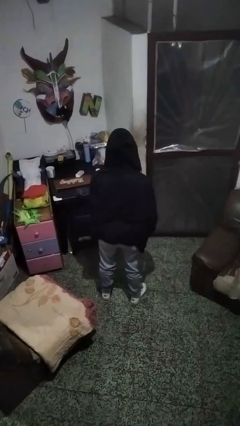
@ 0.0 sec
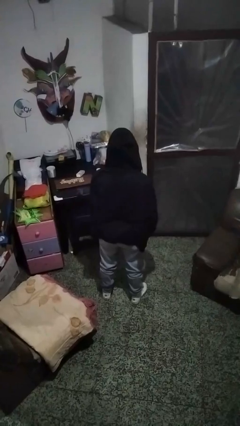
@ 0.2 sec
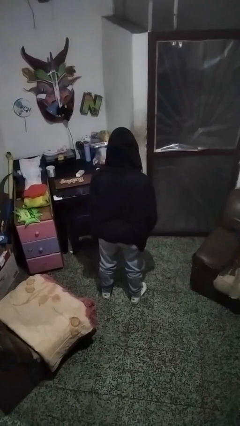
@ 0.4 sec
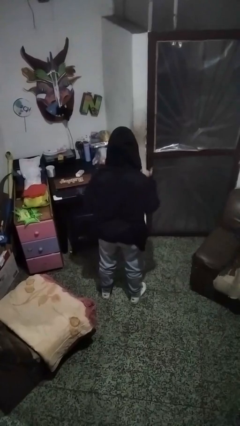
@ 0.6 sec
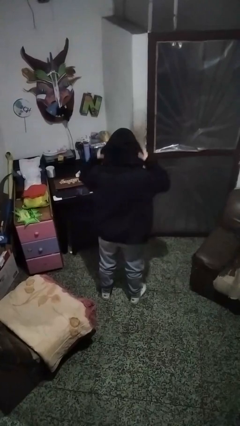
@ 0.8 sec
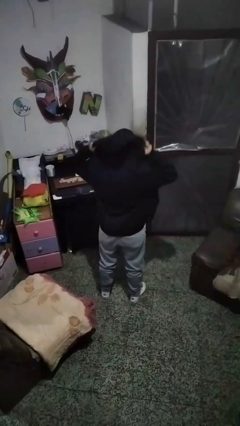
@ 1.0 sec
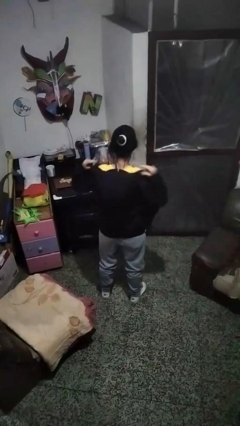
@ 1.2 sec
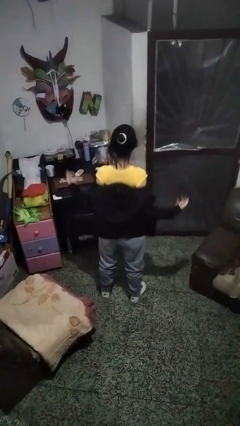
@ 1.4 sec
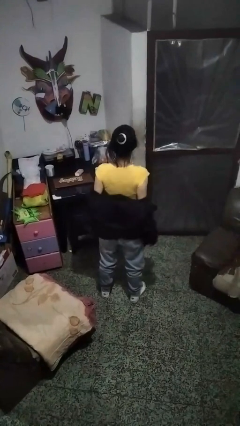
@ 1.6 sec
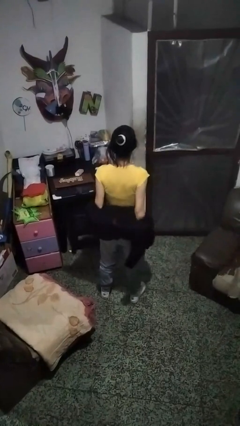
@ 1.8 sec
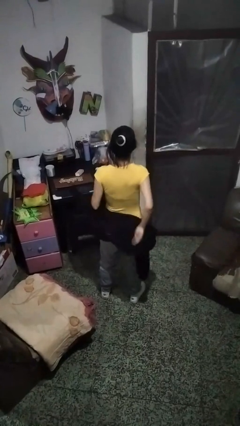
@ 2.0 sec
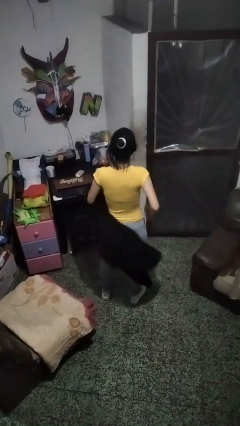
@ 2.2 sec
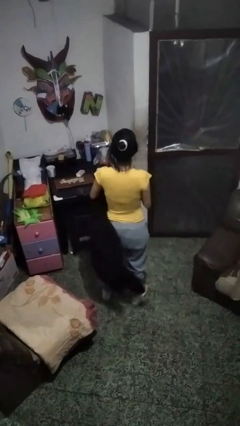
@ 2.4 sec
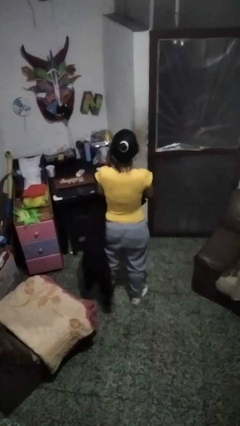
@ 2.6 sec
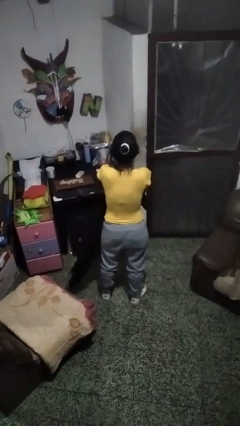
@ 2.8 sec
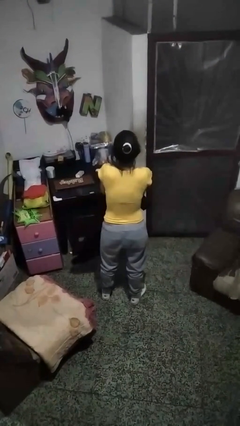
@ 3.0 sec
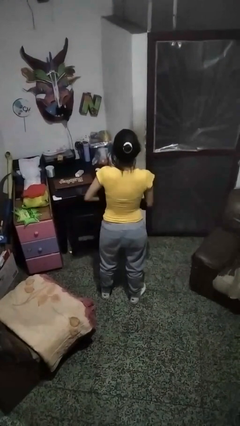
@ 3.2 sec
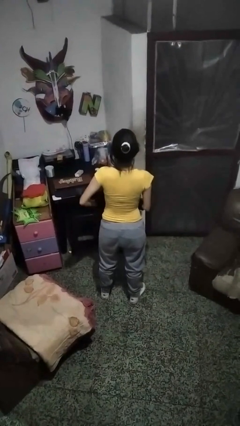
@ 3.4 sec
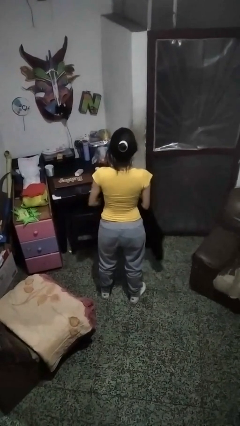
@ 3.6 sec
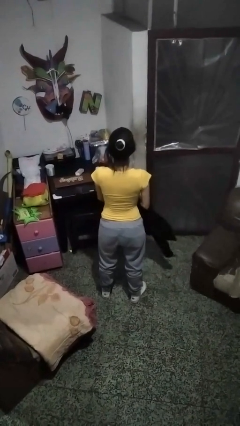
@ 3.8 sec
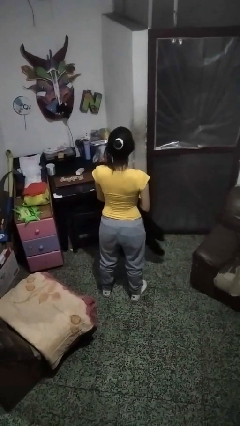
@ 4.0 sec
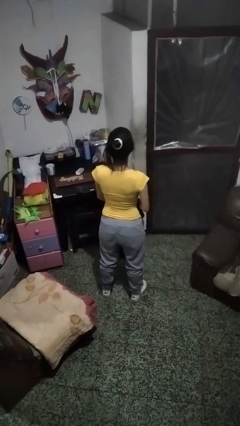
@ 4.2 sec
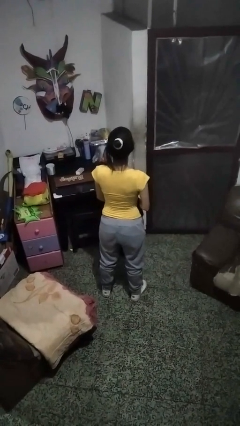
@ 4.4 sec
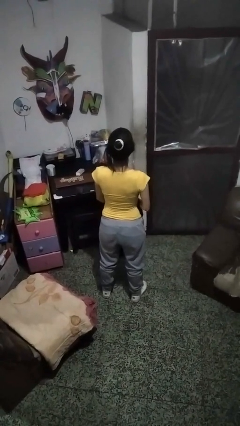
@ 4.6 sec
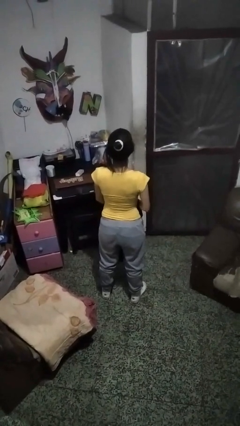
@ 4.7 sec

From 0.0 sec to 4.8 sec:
person takes off hoodie

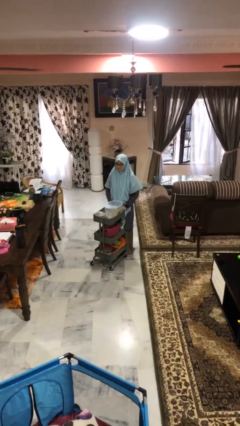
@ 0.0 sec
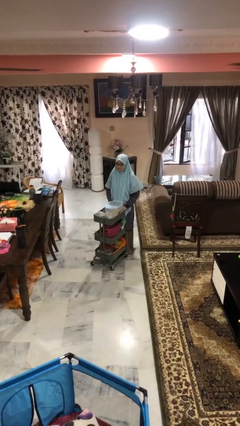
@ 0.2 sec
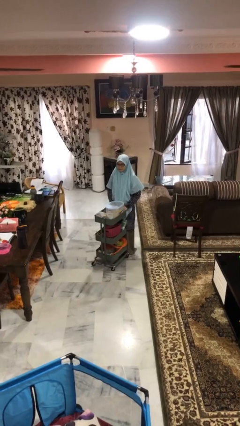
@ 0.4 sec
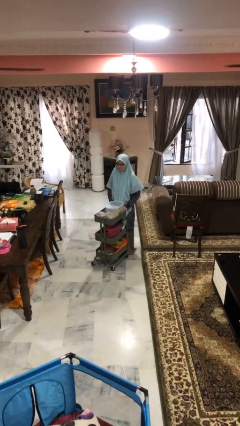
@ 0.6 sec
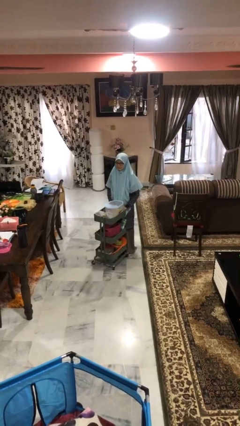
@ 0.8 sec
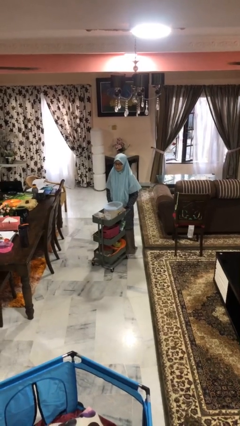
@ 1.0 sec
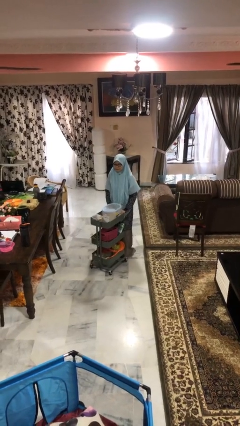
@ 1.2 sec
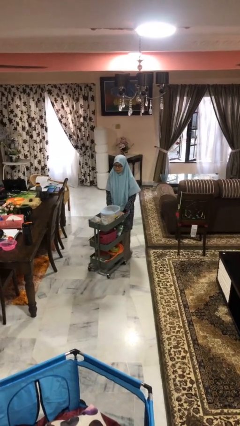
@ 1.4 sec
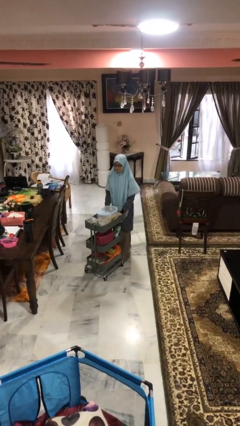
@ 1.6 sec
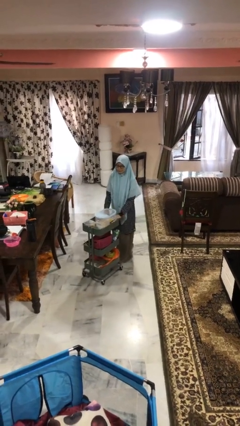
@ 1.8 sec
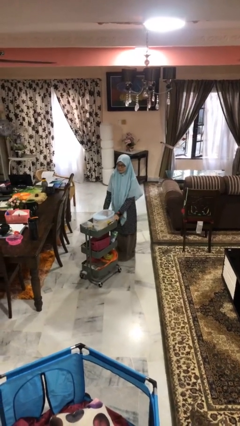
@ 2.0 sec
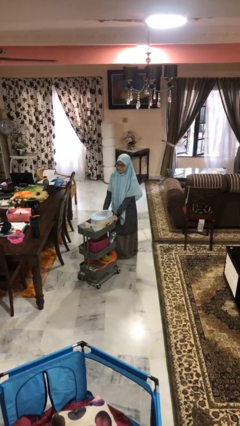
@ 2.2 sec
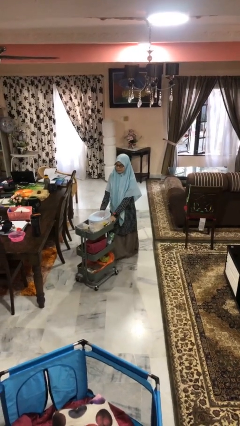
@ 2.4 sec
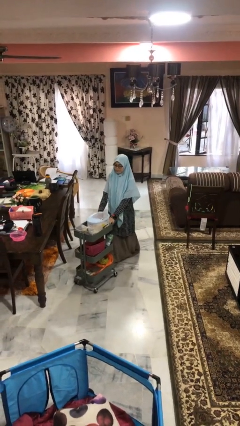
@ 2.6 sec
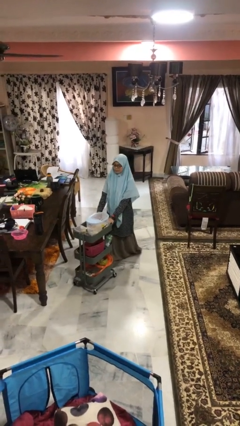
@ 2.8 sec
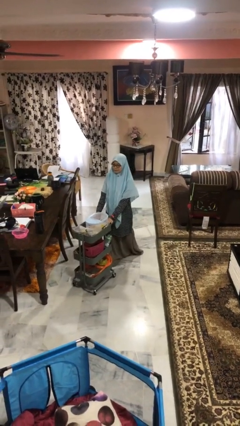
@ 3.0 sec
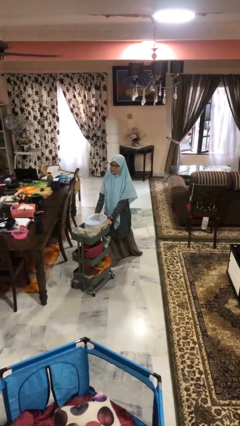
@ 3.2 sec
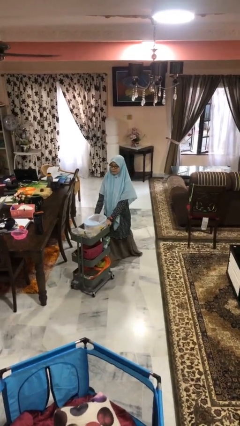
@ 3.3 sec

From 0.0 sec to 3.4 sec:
person pushes wheeled cart

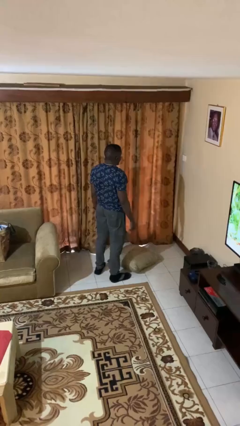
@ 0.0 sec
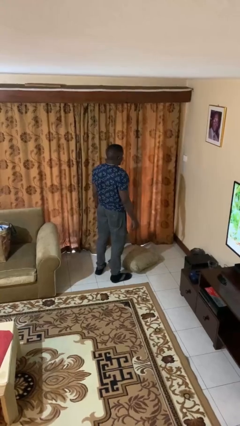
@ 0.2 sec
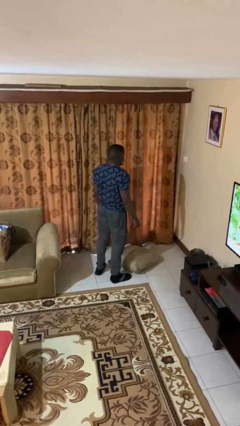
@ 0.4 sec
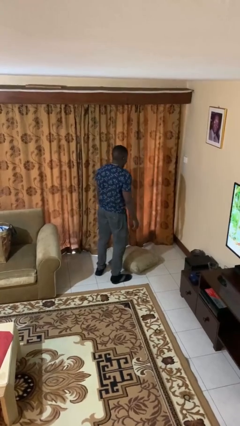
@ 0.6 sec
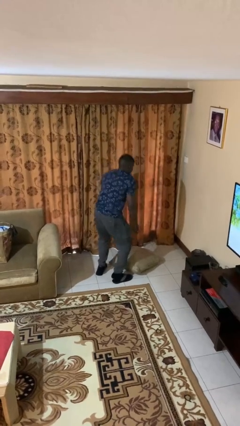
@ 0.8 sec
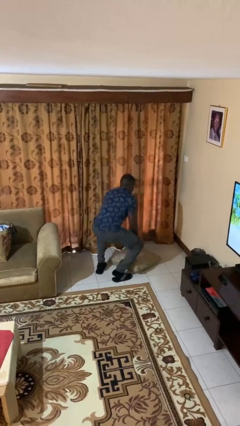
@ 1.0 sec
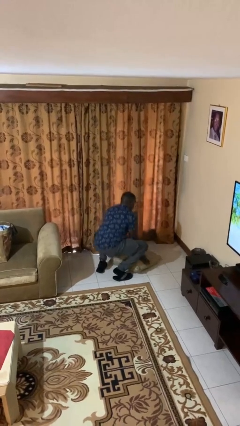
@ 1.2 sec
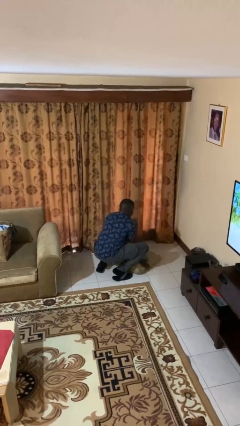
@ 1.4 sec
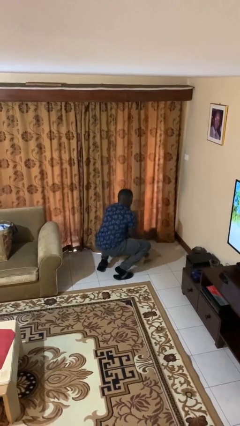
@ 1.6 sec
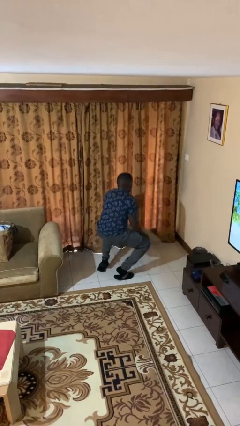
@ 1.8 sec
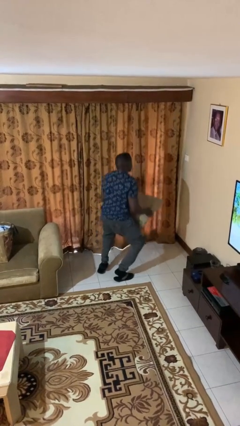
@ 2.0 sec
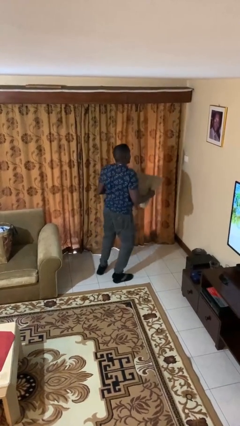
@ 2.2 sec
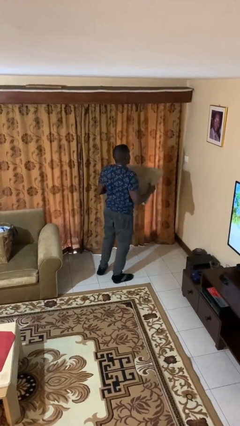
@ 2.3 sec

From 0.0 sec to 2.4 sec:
person picks up object from floor

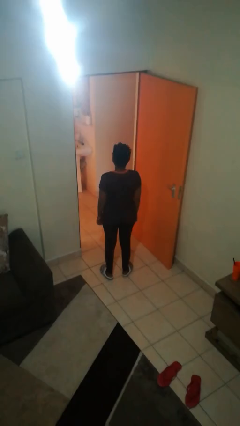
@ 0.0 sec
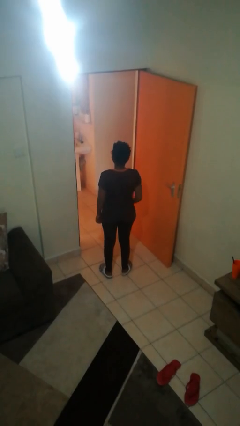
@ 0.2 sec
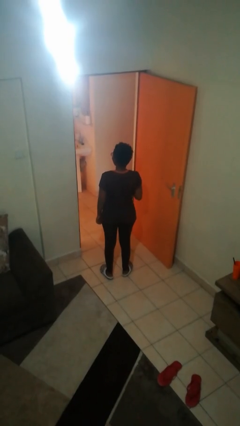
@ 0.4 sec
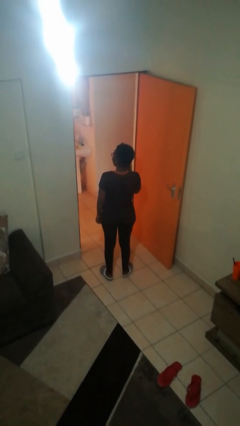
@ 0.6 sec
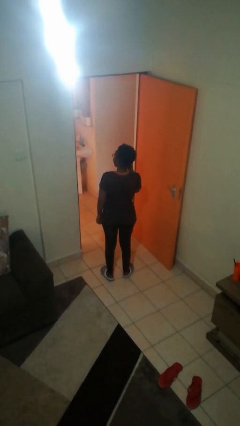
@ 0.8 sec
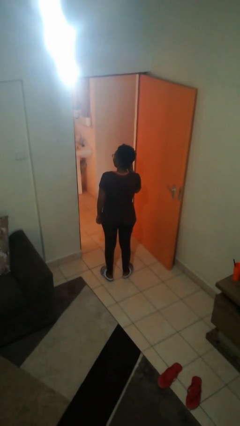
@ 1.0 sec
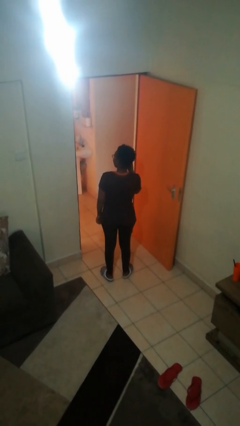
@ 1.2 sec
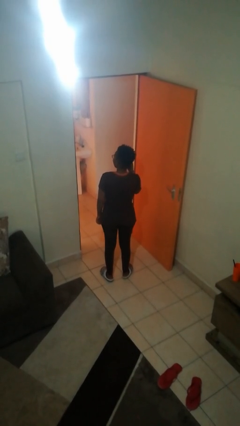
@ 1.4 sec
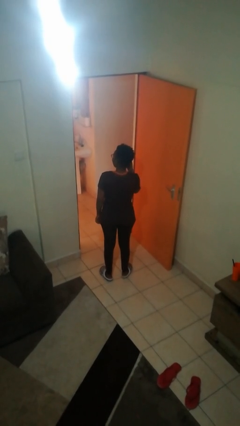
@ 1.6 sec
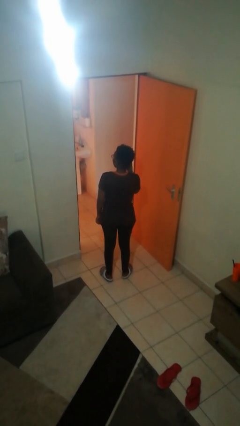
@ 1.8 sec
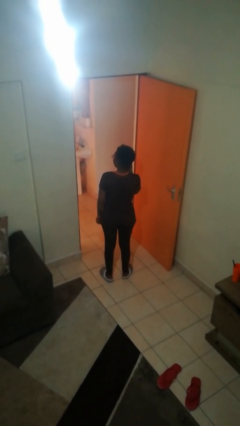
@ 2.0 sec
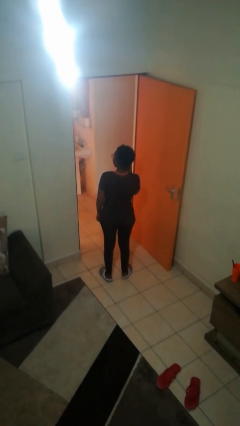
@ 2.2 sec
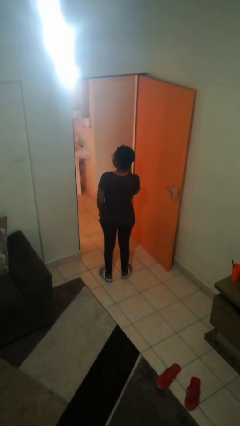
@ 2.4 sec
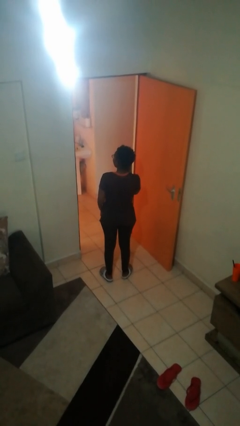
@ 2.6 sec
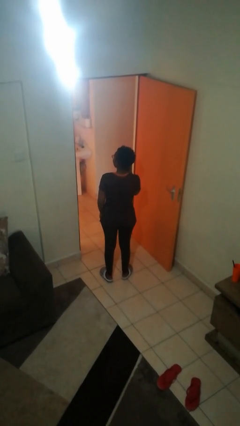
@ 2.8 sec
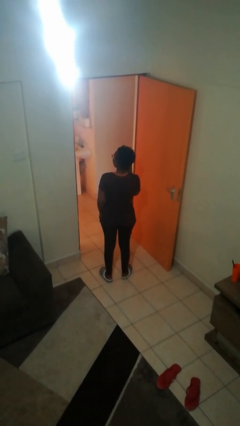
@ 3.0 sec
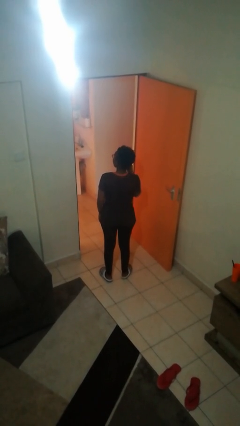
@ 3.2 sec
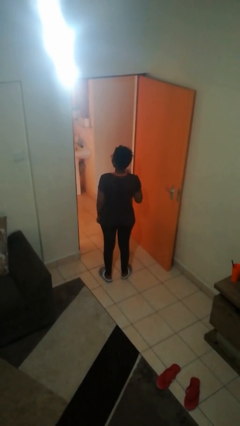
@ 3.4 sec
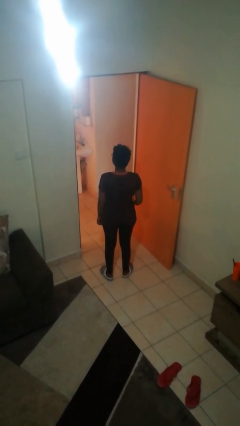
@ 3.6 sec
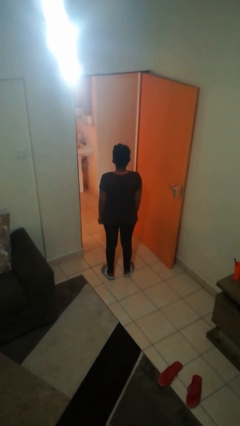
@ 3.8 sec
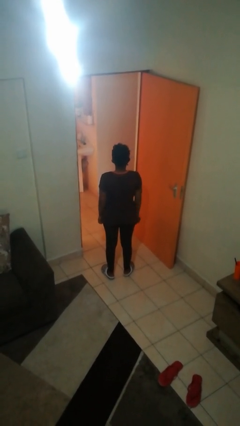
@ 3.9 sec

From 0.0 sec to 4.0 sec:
person puts on earrings

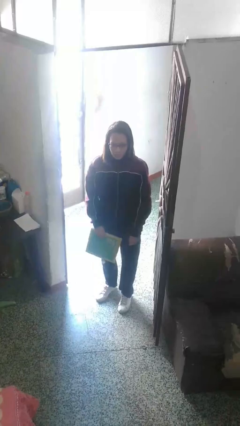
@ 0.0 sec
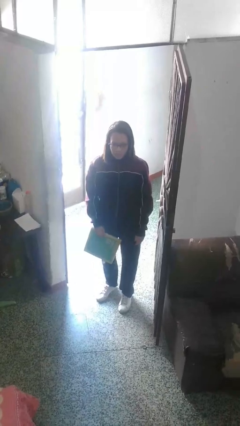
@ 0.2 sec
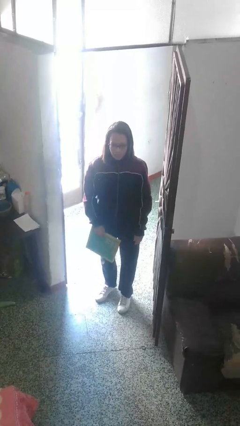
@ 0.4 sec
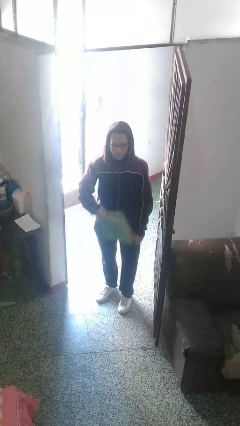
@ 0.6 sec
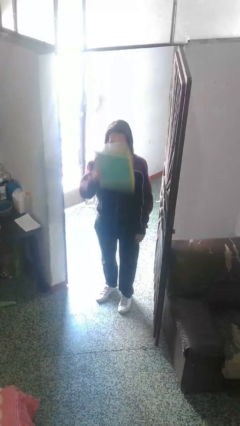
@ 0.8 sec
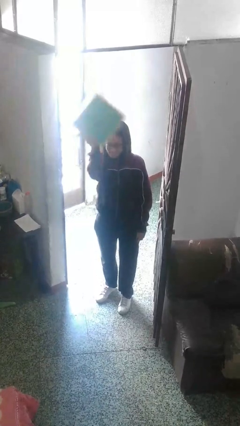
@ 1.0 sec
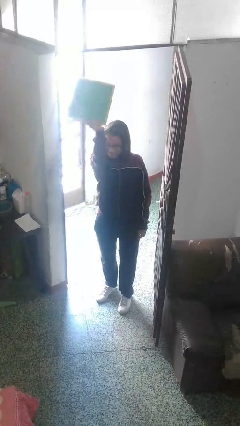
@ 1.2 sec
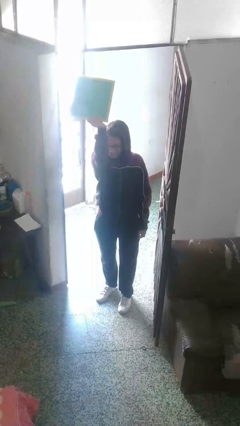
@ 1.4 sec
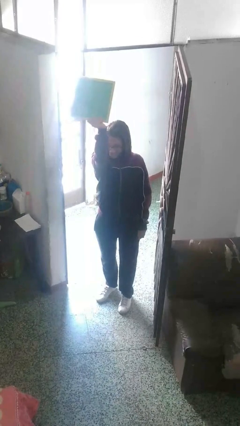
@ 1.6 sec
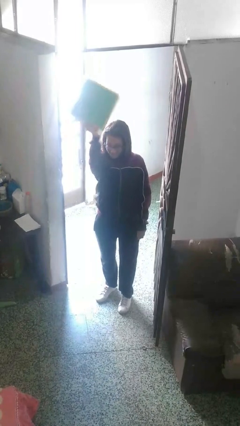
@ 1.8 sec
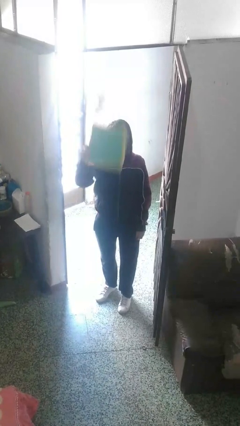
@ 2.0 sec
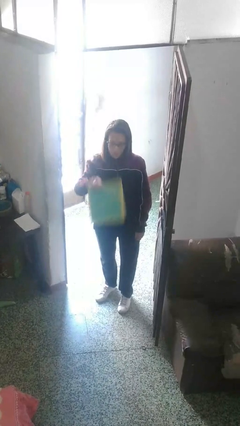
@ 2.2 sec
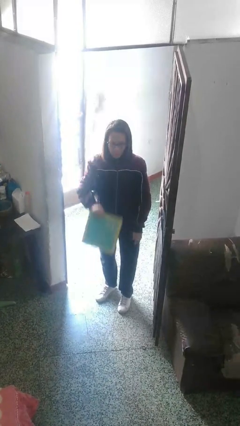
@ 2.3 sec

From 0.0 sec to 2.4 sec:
person holds object above head

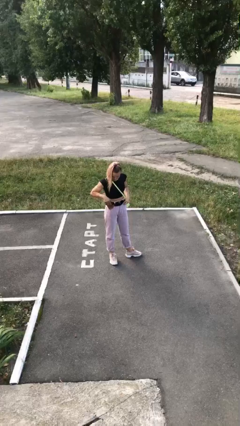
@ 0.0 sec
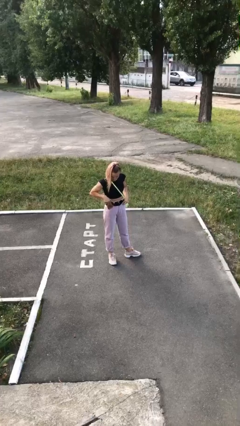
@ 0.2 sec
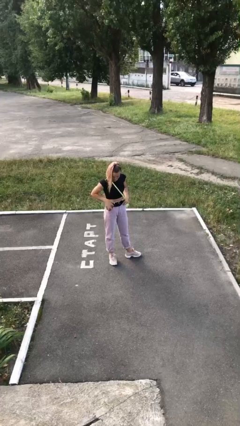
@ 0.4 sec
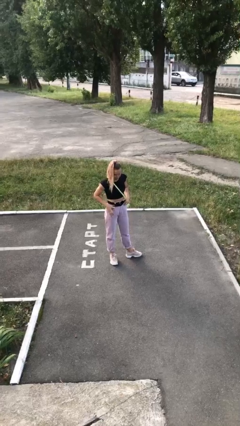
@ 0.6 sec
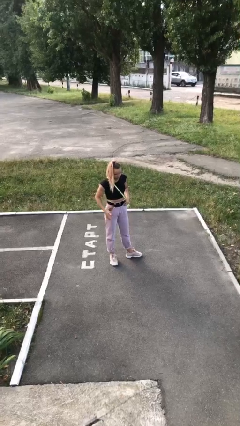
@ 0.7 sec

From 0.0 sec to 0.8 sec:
person puts phone into pocket
